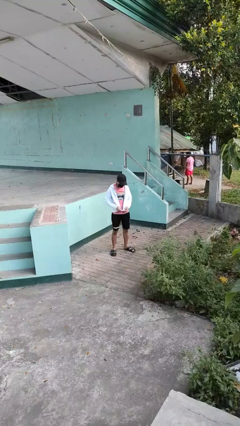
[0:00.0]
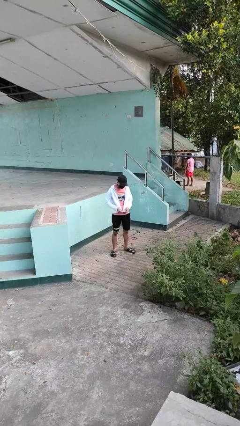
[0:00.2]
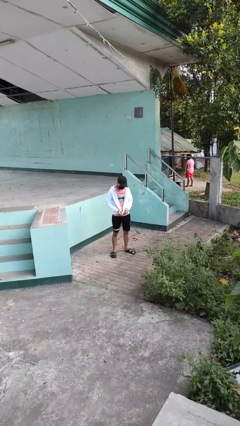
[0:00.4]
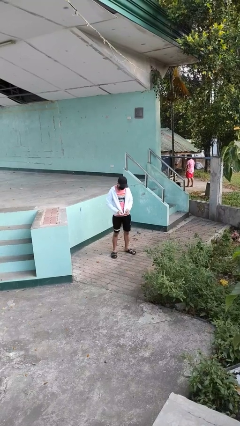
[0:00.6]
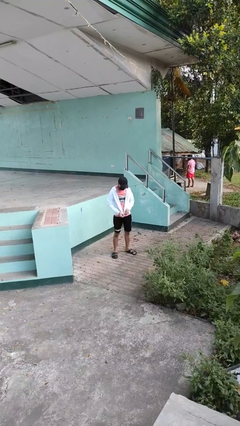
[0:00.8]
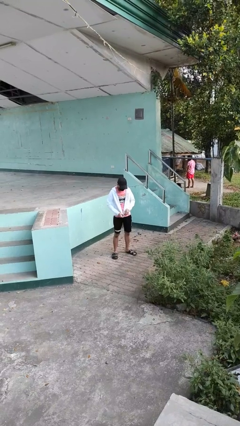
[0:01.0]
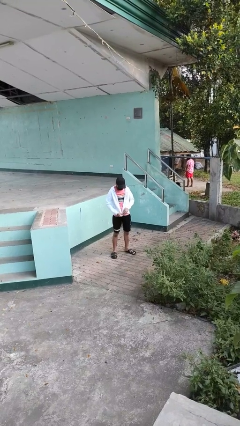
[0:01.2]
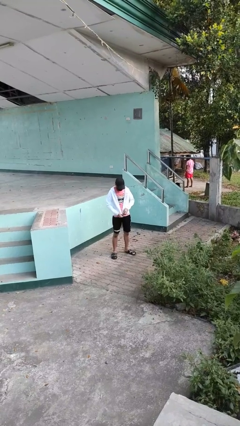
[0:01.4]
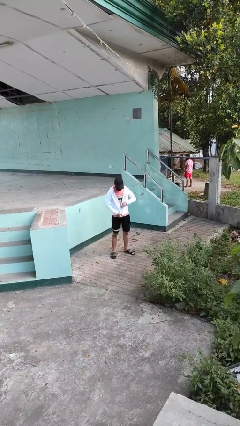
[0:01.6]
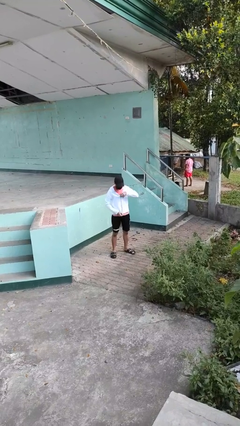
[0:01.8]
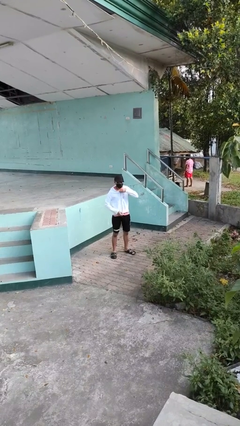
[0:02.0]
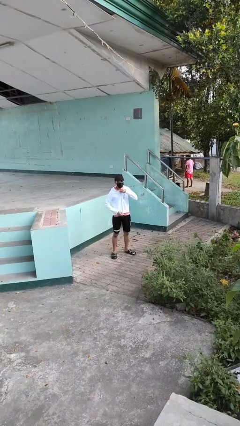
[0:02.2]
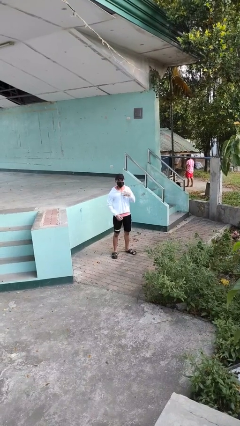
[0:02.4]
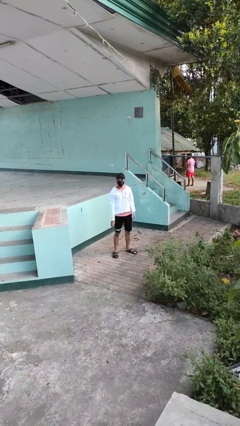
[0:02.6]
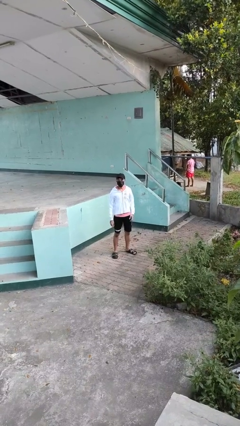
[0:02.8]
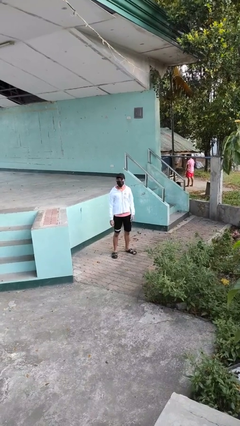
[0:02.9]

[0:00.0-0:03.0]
person zips up jacket

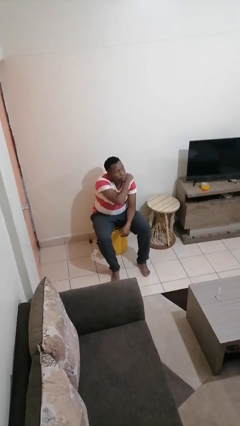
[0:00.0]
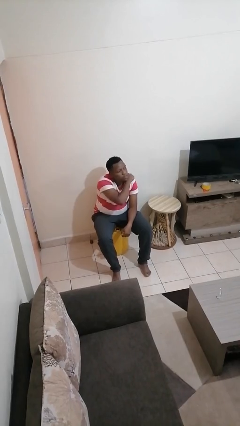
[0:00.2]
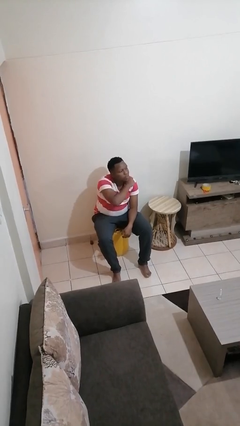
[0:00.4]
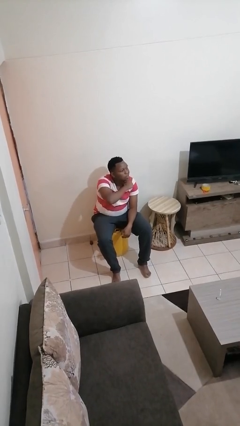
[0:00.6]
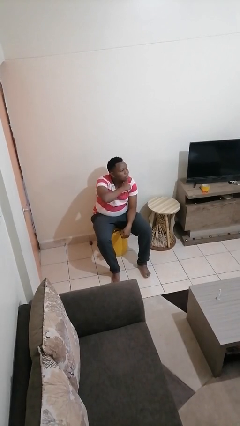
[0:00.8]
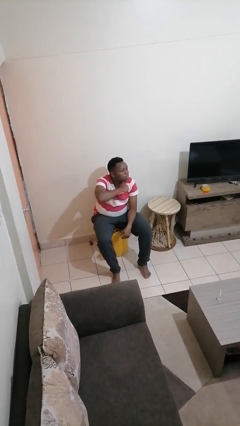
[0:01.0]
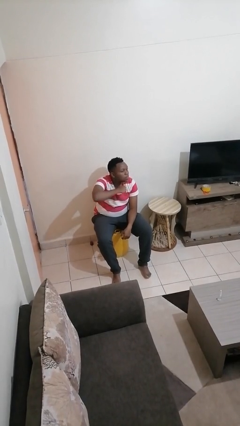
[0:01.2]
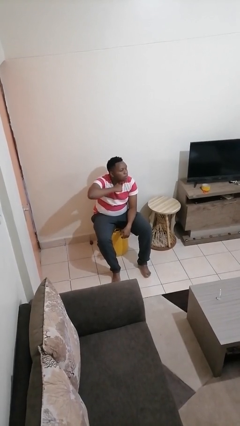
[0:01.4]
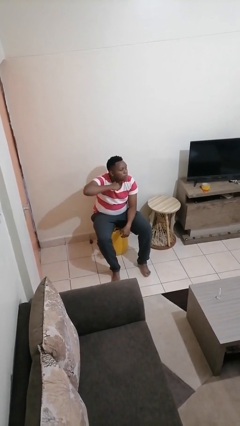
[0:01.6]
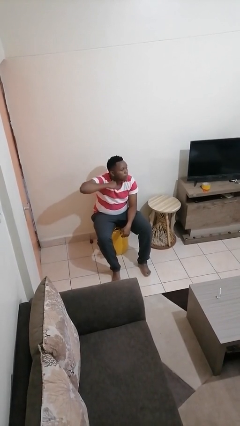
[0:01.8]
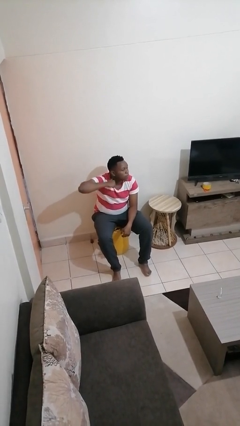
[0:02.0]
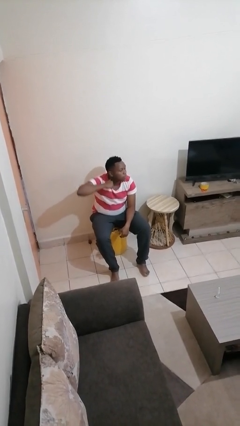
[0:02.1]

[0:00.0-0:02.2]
person gestures cut

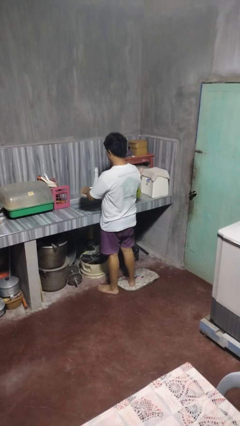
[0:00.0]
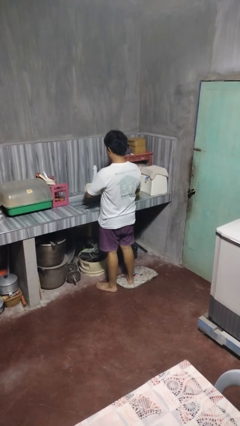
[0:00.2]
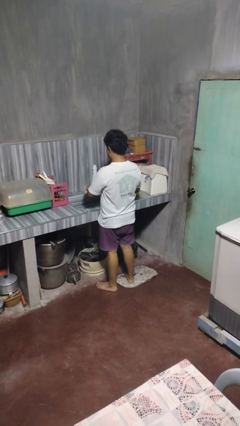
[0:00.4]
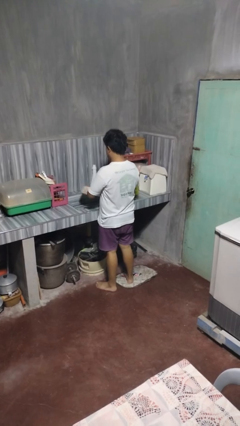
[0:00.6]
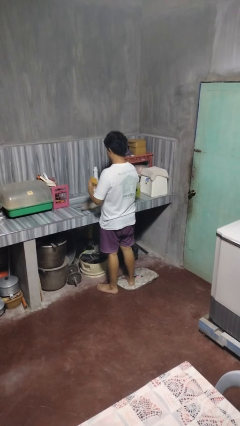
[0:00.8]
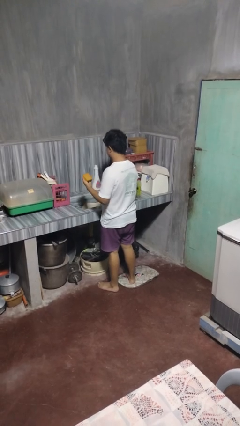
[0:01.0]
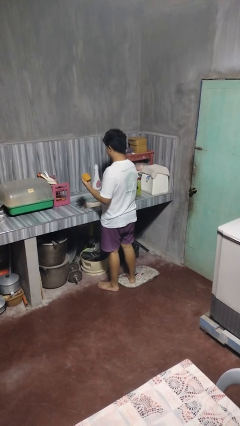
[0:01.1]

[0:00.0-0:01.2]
person washes dish

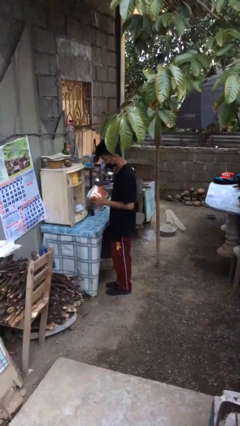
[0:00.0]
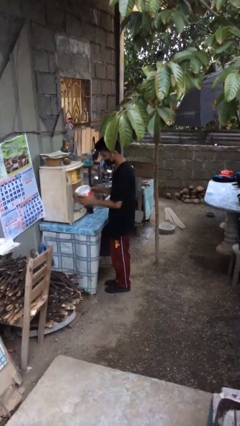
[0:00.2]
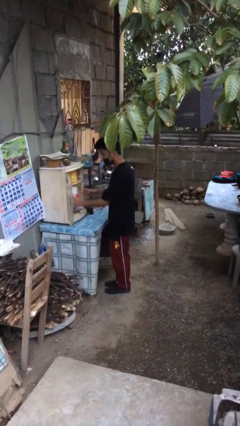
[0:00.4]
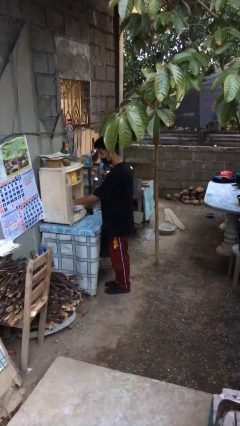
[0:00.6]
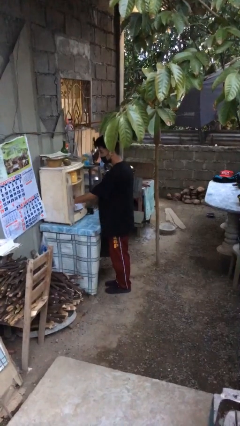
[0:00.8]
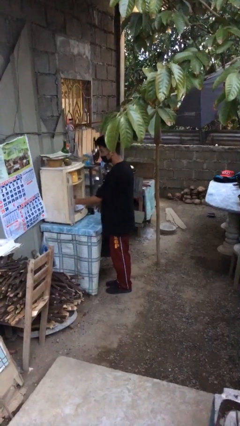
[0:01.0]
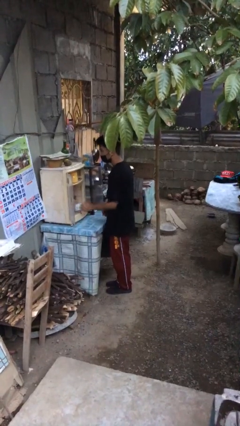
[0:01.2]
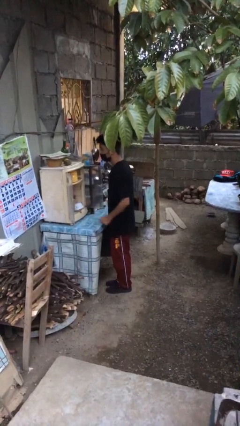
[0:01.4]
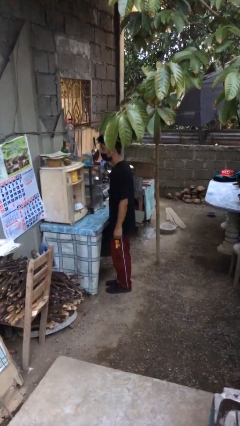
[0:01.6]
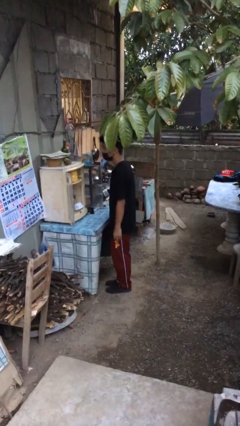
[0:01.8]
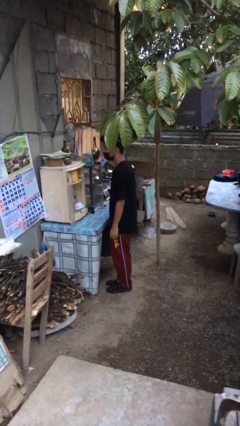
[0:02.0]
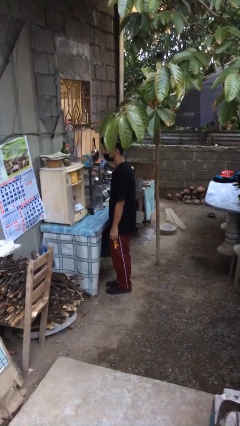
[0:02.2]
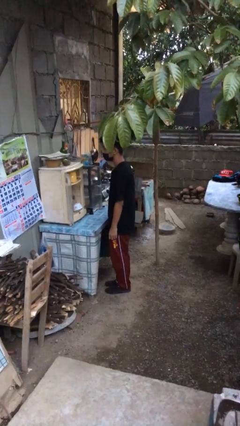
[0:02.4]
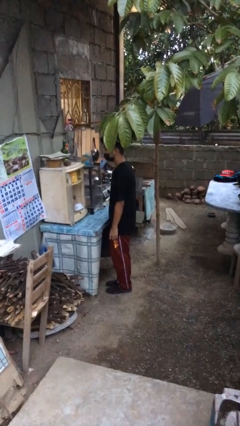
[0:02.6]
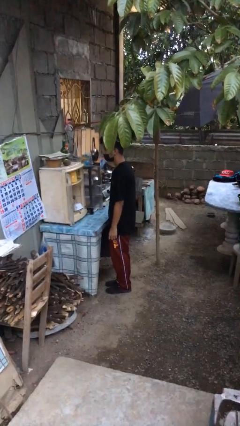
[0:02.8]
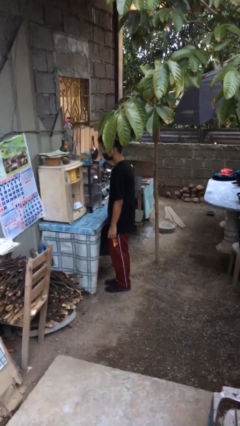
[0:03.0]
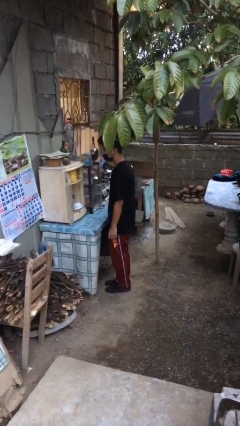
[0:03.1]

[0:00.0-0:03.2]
person puts down object into cabinet

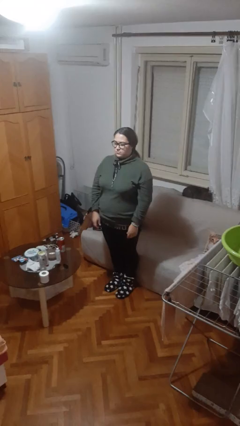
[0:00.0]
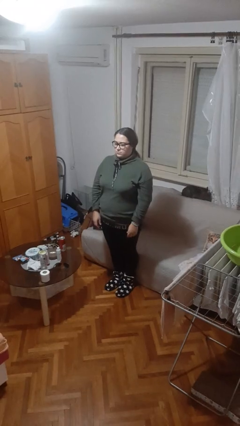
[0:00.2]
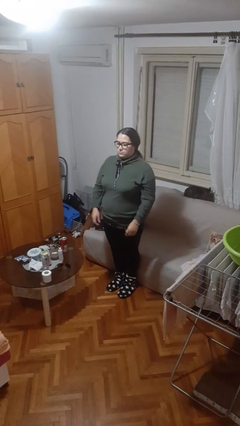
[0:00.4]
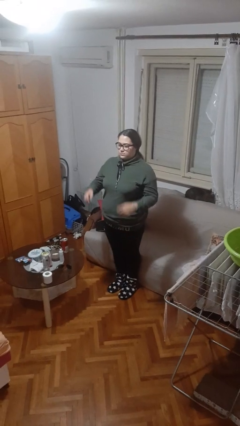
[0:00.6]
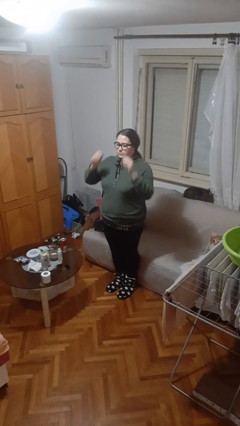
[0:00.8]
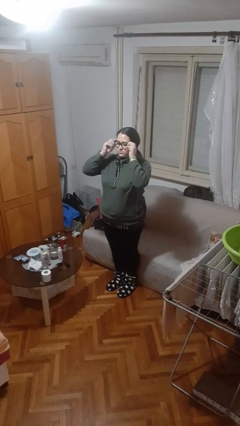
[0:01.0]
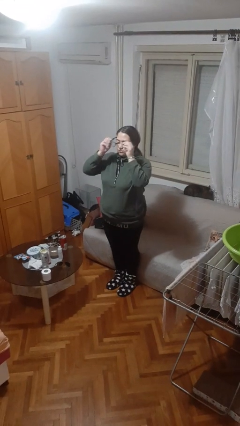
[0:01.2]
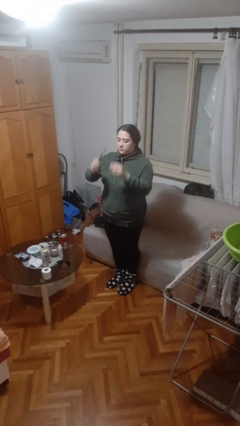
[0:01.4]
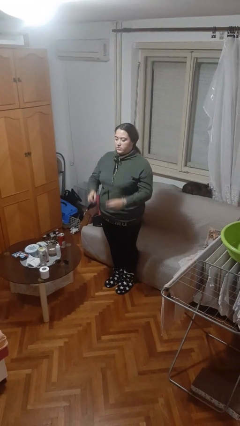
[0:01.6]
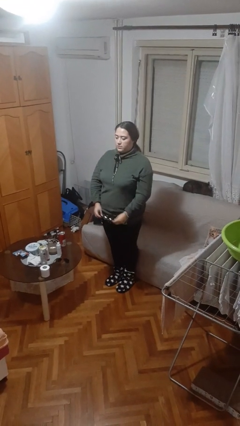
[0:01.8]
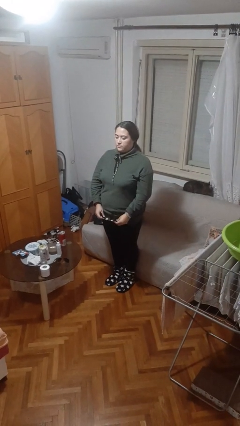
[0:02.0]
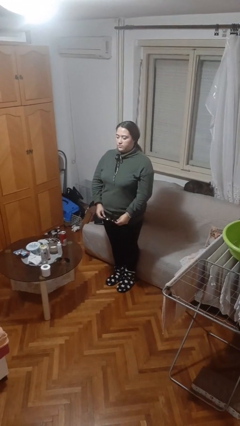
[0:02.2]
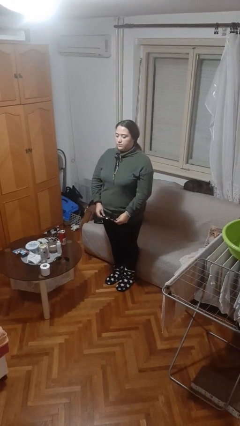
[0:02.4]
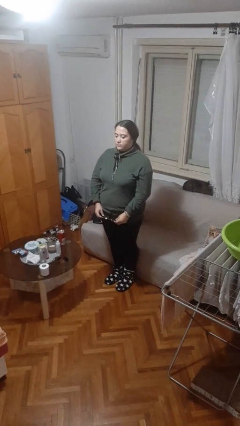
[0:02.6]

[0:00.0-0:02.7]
person takes off glasses

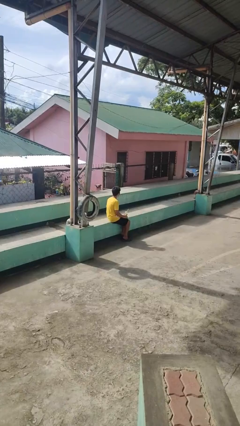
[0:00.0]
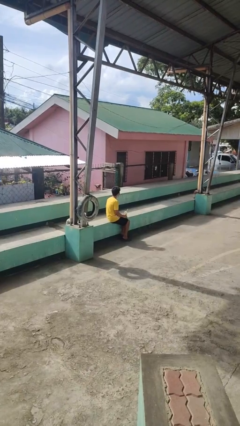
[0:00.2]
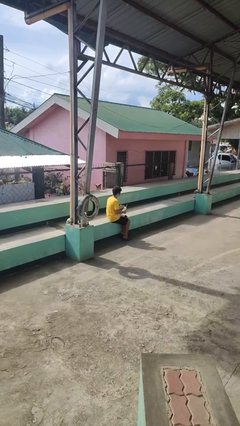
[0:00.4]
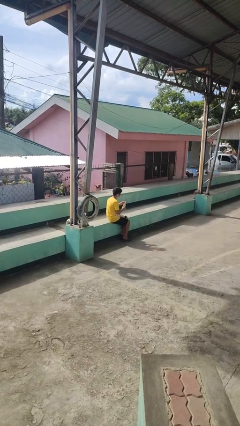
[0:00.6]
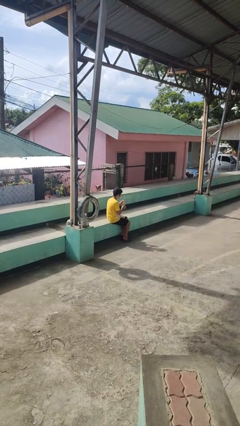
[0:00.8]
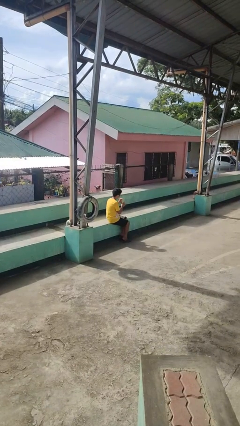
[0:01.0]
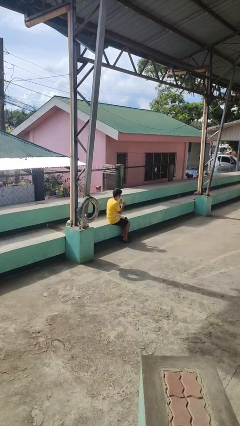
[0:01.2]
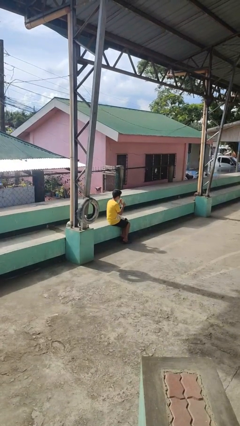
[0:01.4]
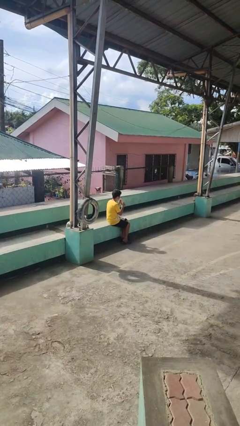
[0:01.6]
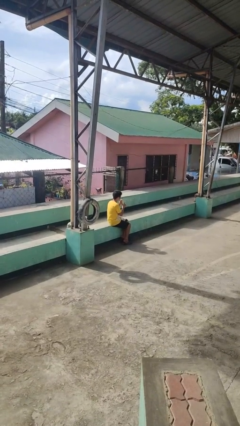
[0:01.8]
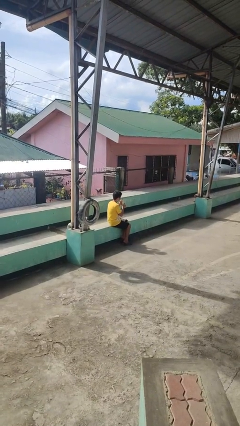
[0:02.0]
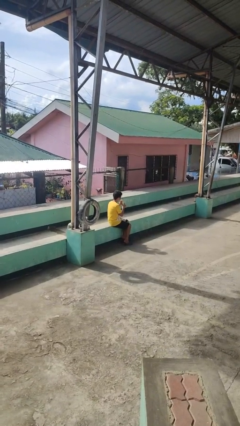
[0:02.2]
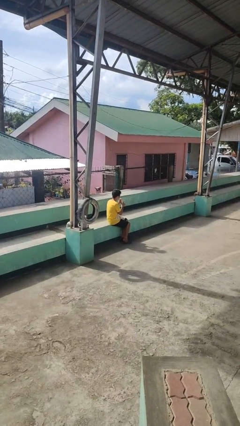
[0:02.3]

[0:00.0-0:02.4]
person drinks from straw

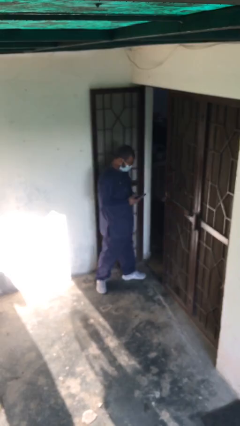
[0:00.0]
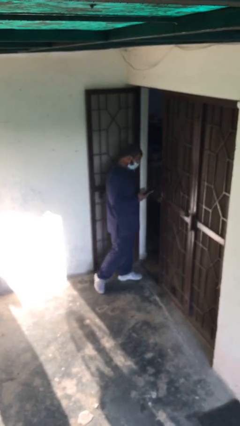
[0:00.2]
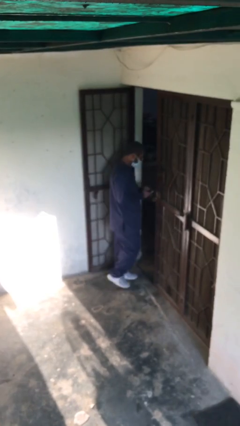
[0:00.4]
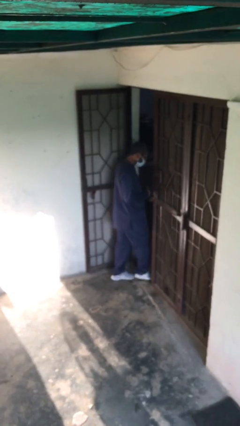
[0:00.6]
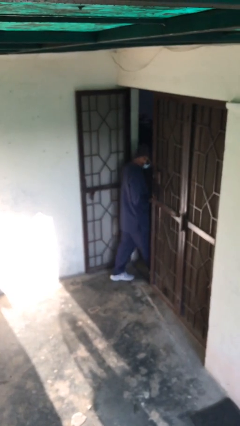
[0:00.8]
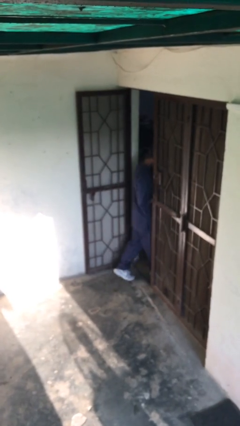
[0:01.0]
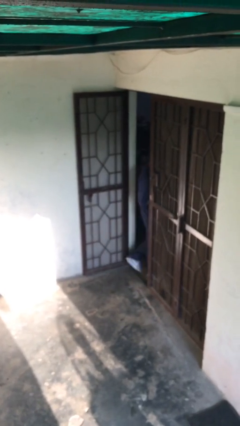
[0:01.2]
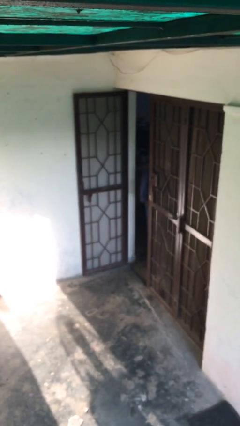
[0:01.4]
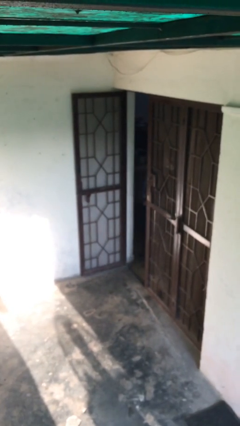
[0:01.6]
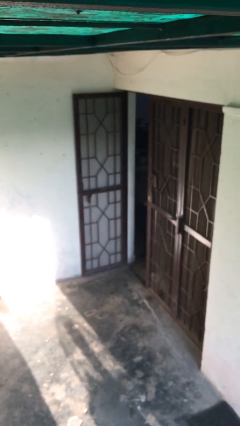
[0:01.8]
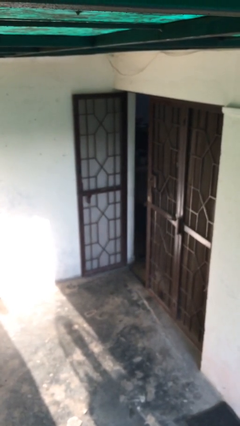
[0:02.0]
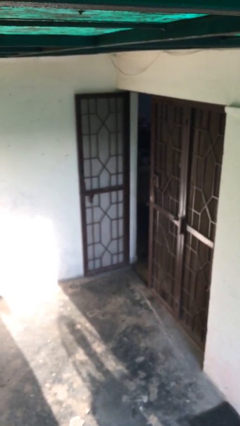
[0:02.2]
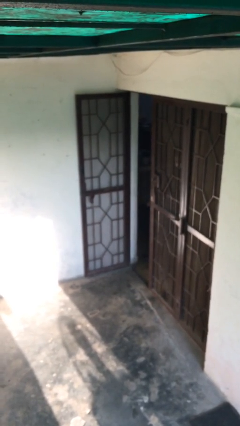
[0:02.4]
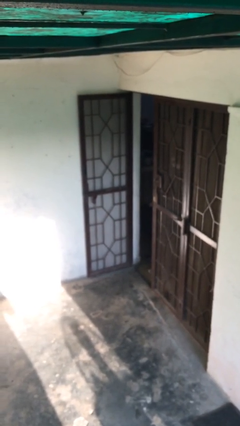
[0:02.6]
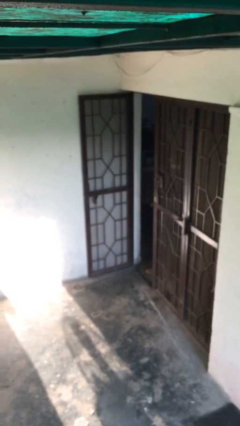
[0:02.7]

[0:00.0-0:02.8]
person exits scene through structure
